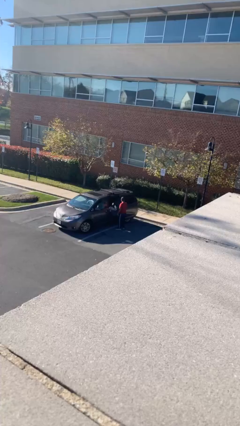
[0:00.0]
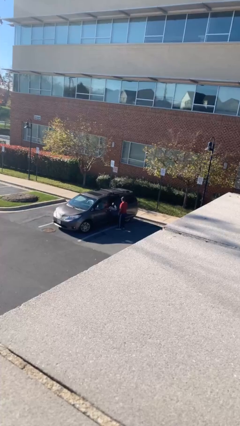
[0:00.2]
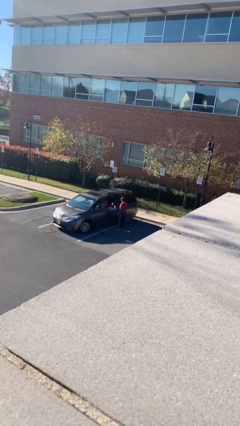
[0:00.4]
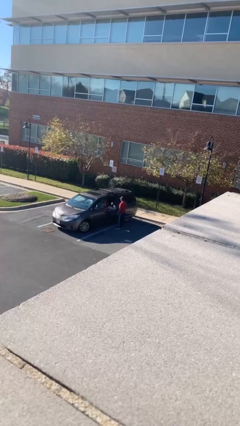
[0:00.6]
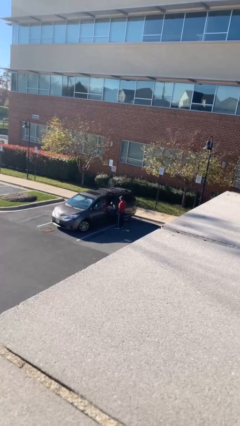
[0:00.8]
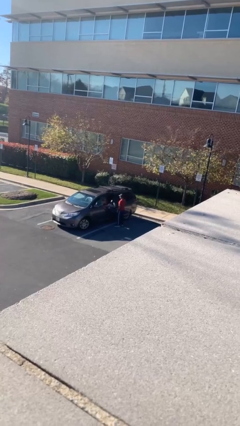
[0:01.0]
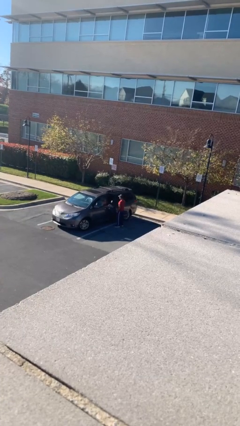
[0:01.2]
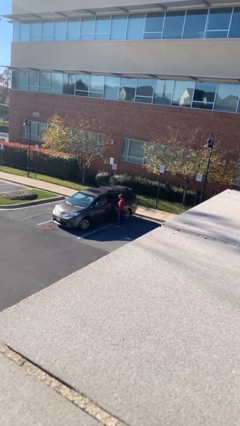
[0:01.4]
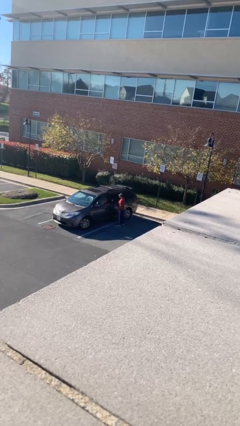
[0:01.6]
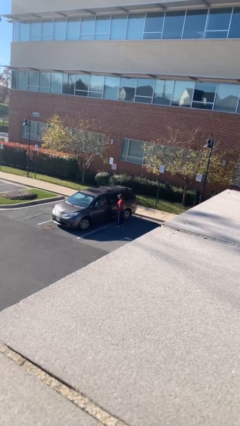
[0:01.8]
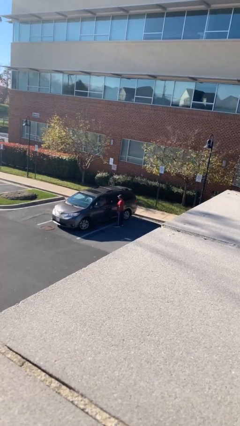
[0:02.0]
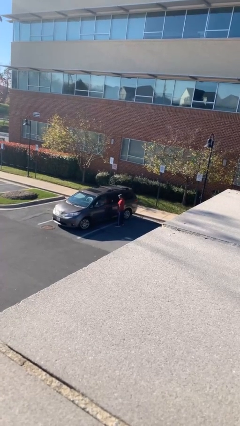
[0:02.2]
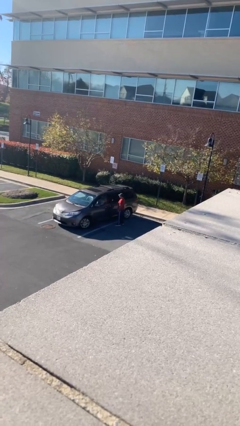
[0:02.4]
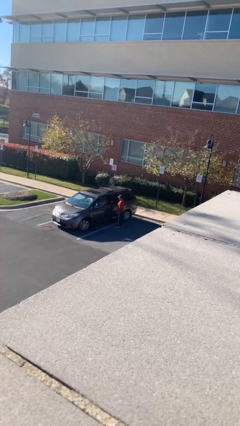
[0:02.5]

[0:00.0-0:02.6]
person closes car door

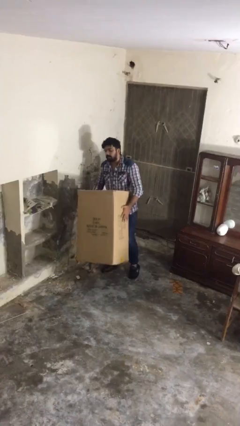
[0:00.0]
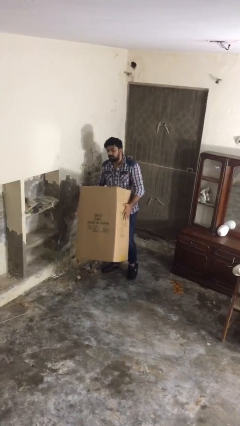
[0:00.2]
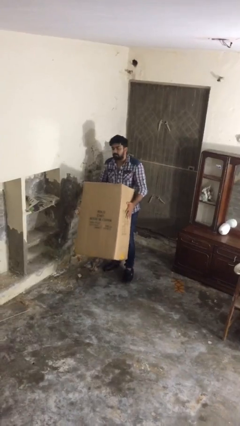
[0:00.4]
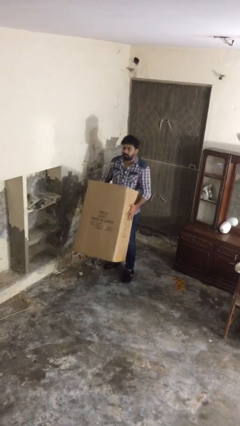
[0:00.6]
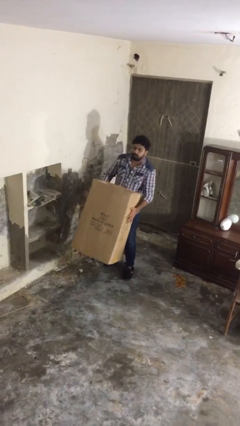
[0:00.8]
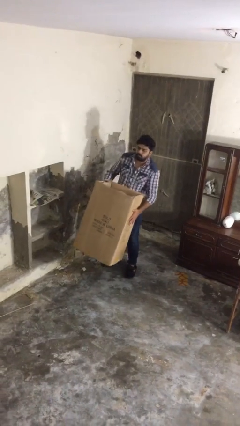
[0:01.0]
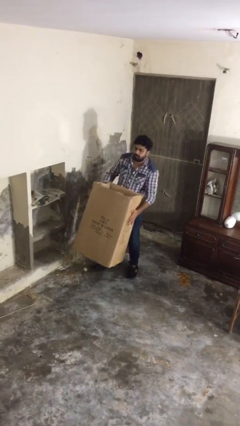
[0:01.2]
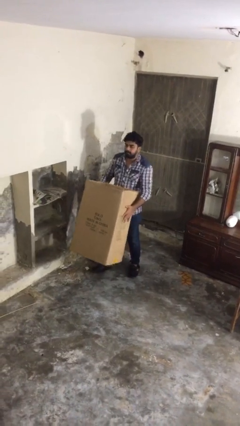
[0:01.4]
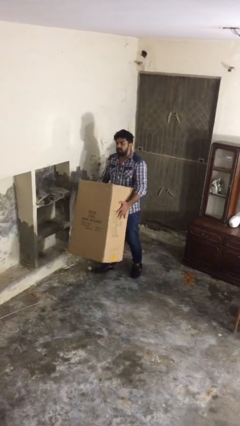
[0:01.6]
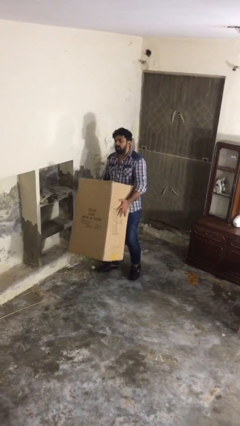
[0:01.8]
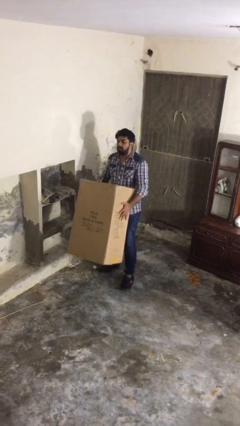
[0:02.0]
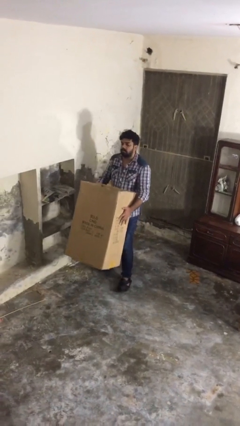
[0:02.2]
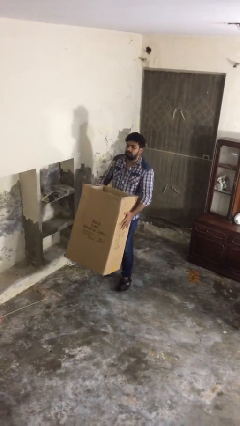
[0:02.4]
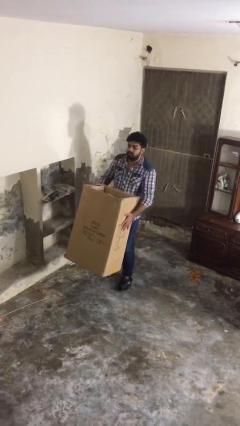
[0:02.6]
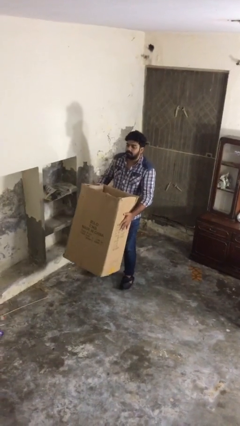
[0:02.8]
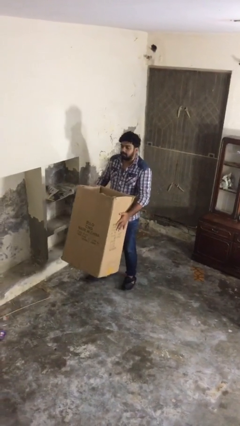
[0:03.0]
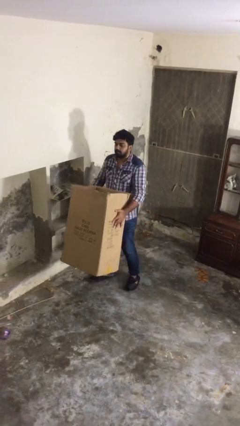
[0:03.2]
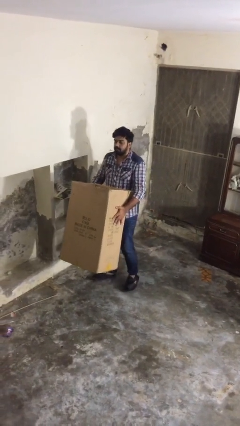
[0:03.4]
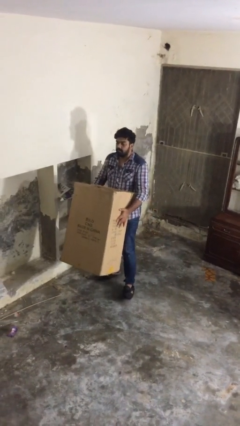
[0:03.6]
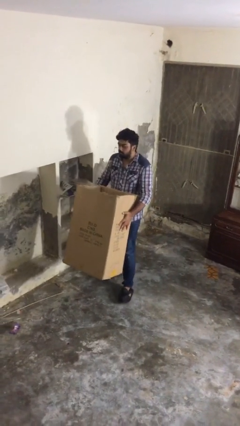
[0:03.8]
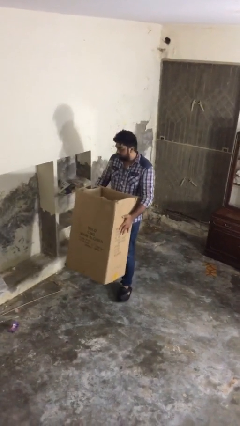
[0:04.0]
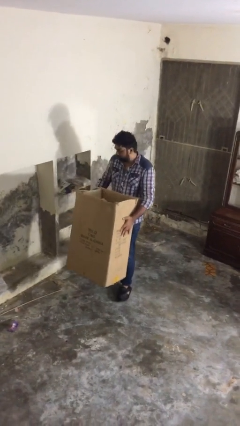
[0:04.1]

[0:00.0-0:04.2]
person carries heavy object

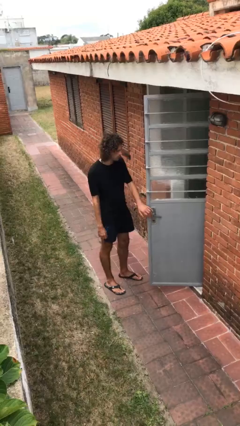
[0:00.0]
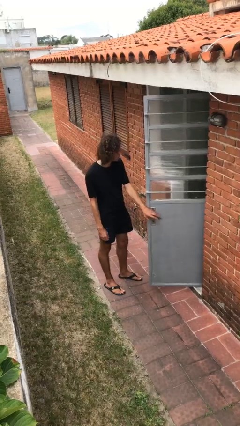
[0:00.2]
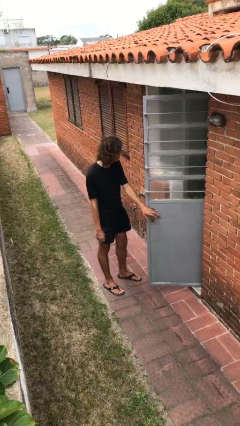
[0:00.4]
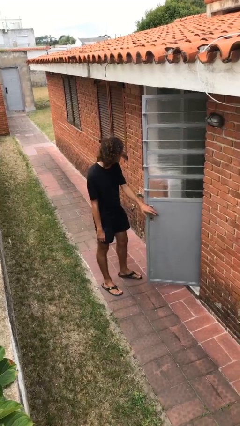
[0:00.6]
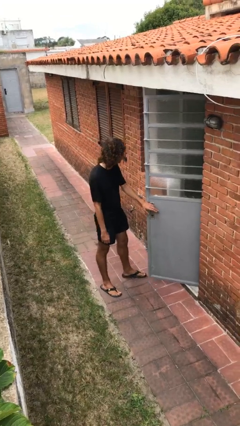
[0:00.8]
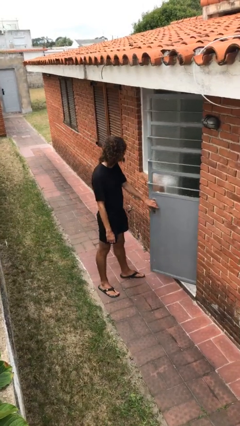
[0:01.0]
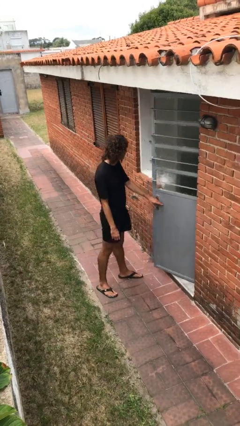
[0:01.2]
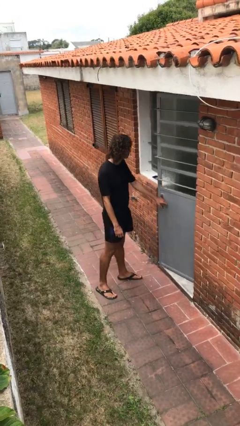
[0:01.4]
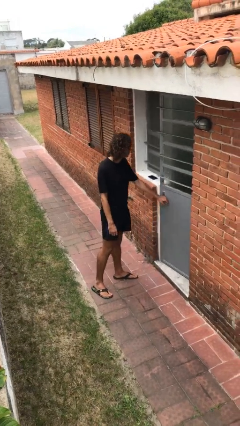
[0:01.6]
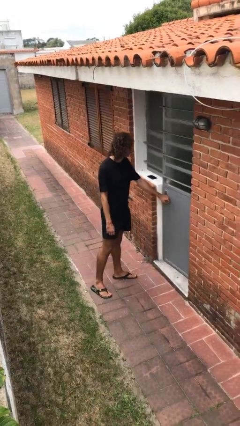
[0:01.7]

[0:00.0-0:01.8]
person closes facility door

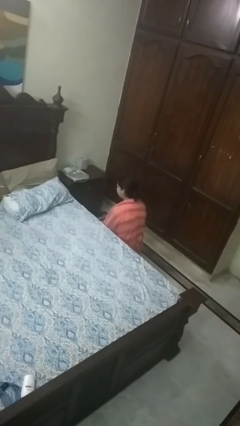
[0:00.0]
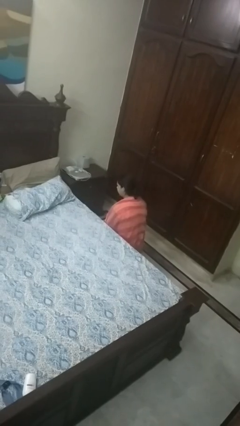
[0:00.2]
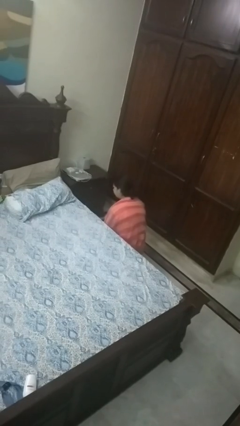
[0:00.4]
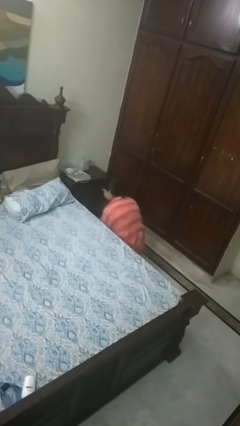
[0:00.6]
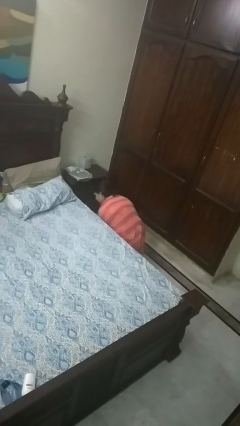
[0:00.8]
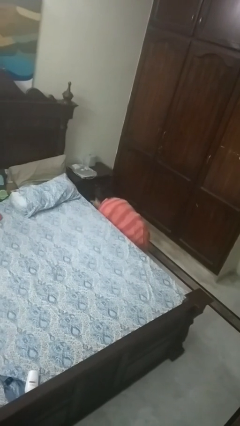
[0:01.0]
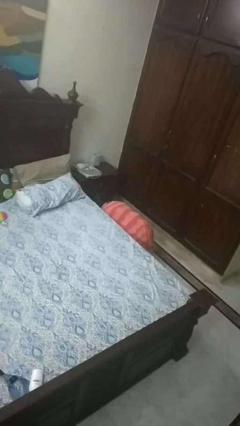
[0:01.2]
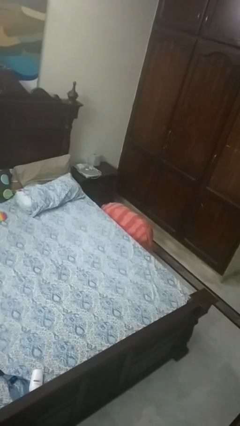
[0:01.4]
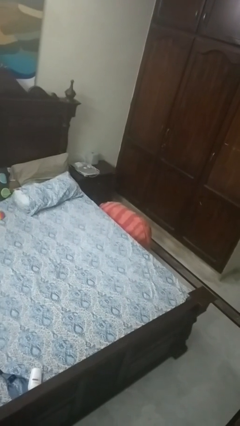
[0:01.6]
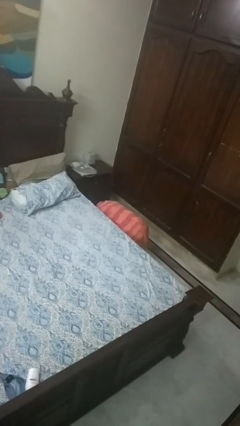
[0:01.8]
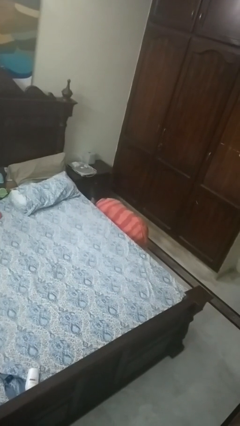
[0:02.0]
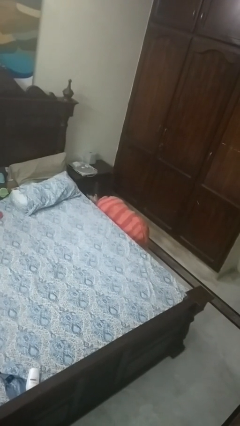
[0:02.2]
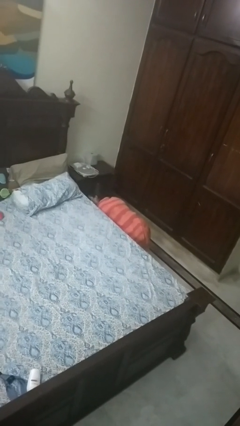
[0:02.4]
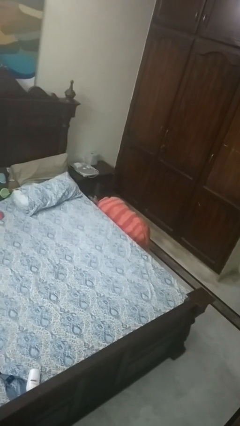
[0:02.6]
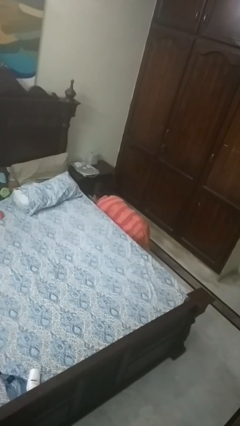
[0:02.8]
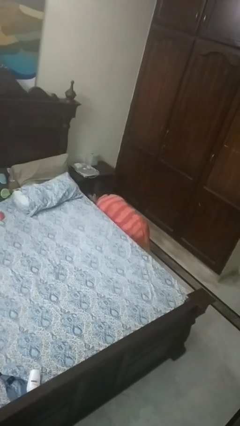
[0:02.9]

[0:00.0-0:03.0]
person searches under bed

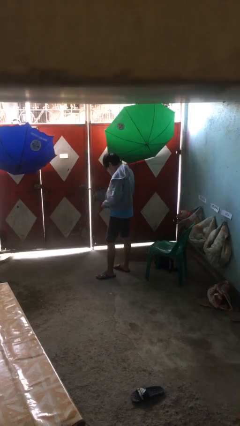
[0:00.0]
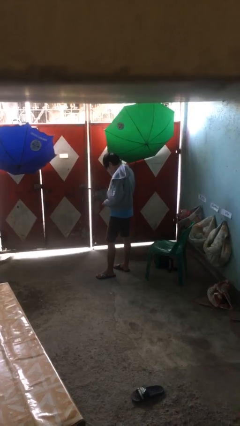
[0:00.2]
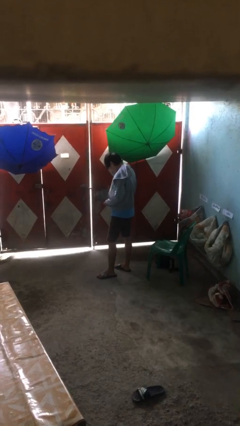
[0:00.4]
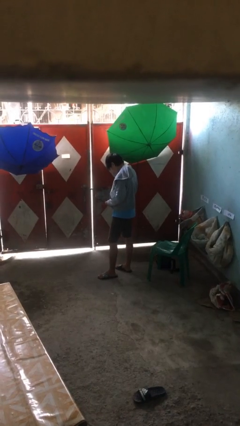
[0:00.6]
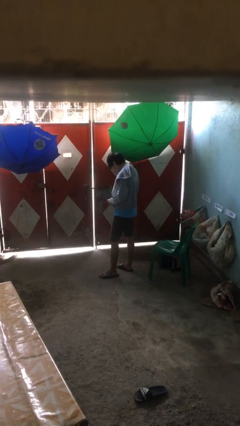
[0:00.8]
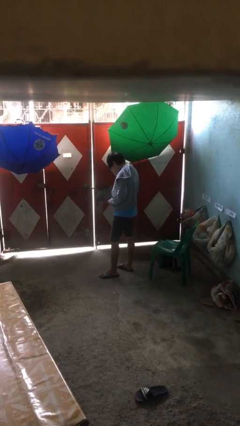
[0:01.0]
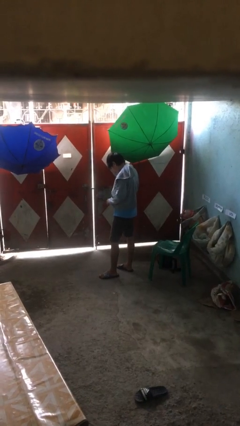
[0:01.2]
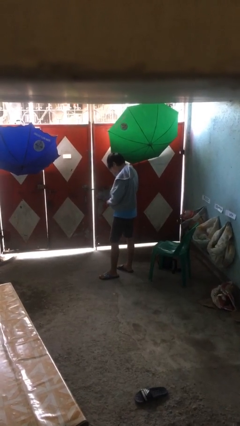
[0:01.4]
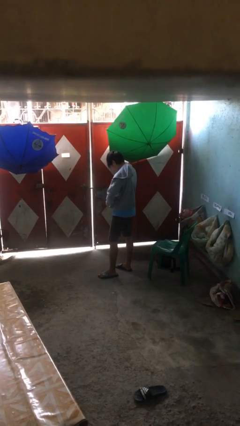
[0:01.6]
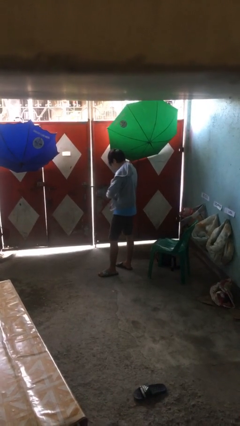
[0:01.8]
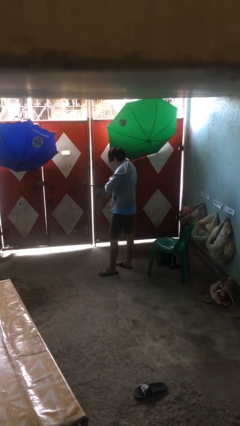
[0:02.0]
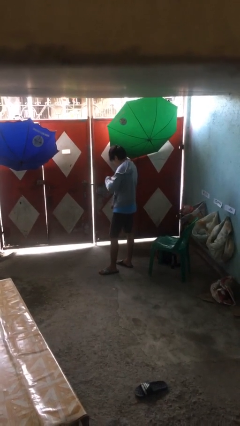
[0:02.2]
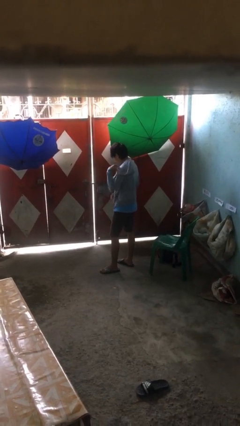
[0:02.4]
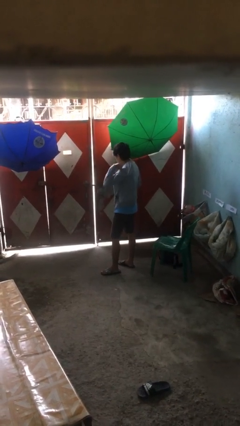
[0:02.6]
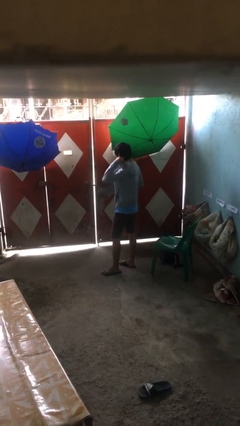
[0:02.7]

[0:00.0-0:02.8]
person zips up jacket

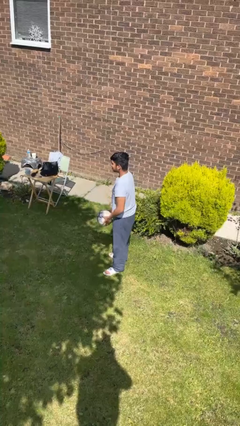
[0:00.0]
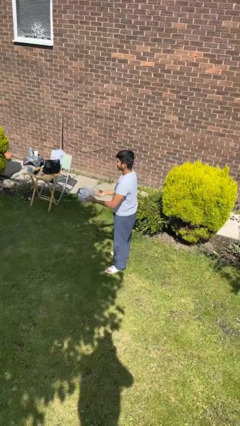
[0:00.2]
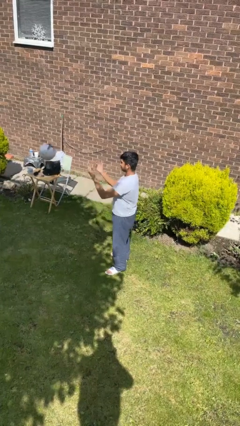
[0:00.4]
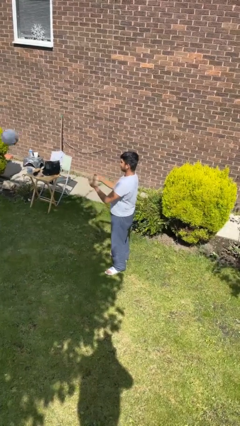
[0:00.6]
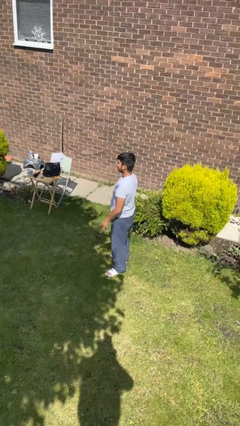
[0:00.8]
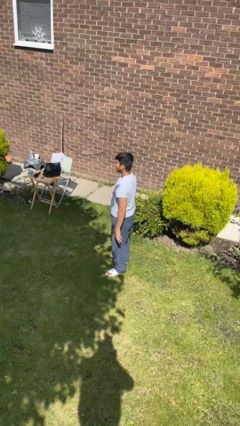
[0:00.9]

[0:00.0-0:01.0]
person throws object to person

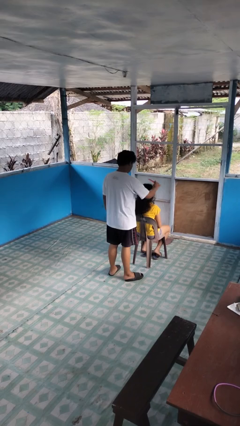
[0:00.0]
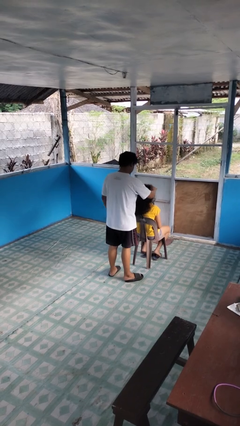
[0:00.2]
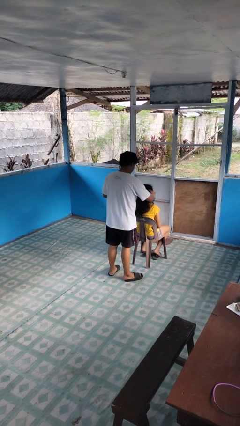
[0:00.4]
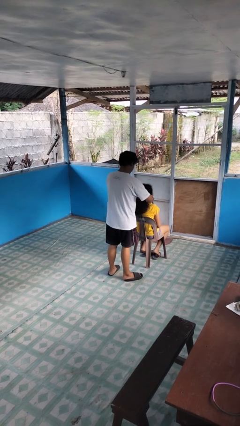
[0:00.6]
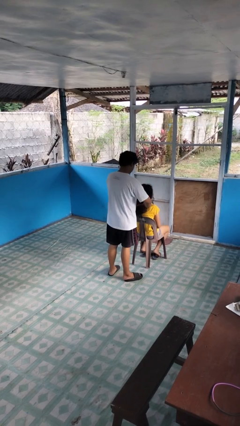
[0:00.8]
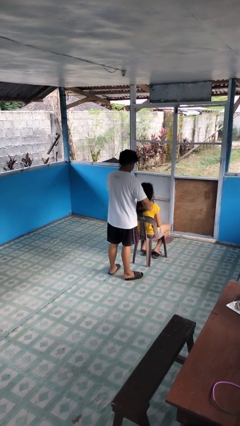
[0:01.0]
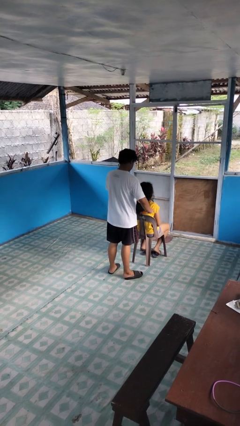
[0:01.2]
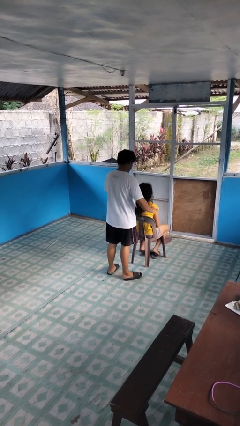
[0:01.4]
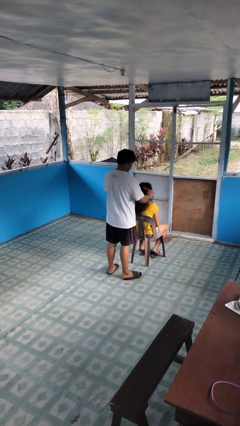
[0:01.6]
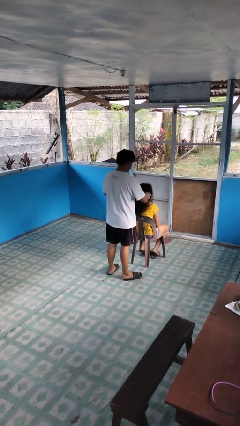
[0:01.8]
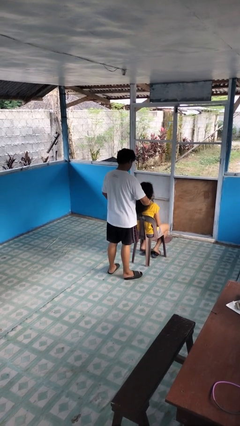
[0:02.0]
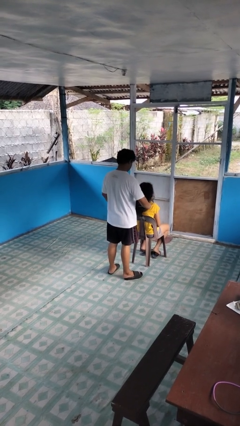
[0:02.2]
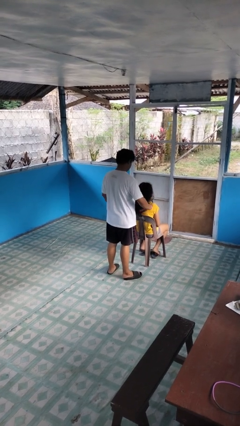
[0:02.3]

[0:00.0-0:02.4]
person brushes hair of person
